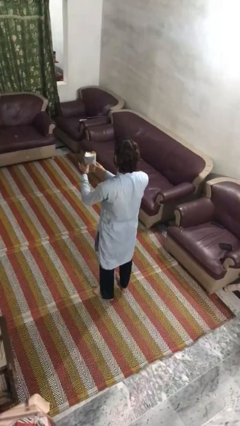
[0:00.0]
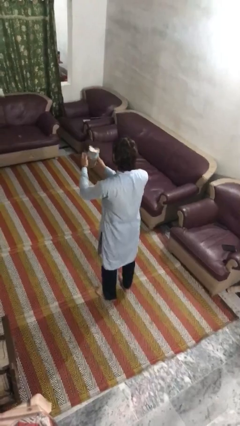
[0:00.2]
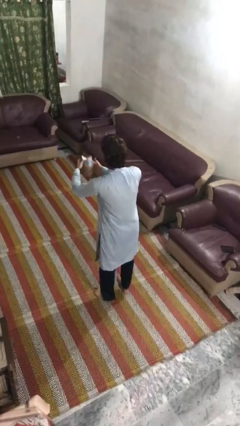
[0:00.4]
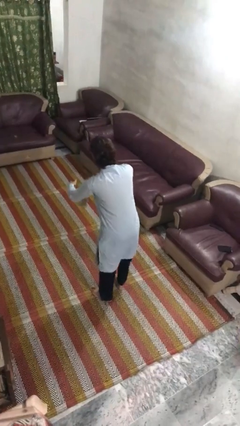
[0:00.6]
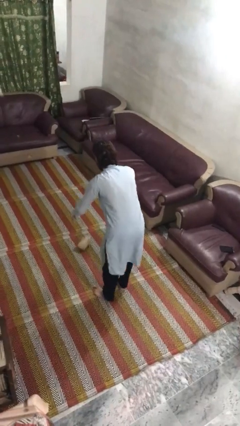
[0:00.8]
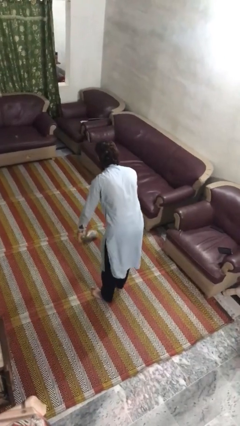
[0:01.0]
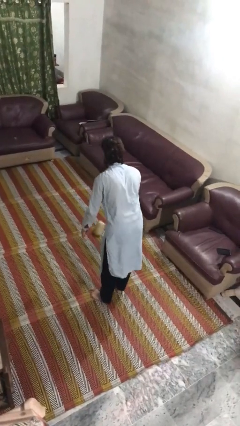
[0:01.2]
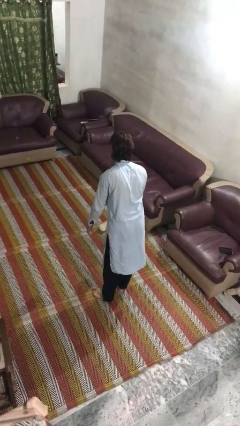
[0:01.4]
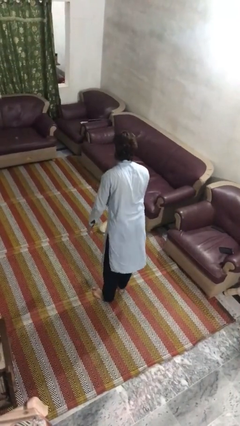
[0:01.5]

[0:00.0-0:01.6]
person drops object

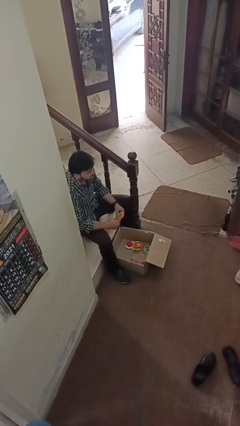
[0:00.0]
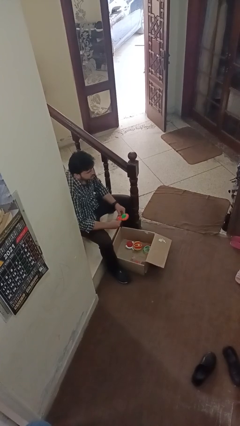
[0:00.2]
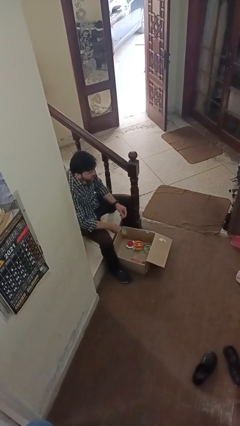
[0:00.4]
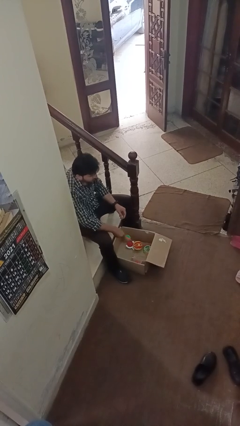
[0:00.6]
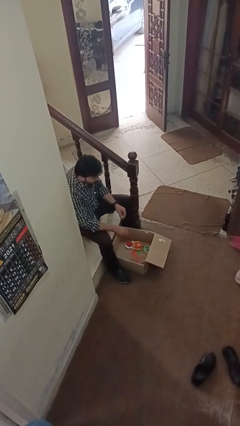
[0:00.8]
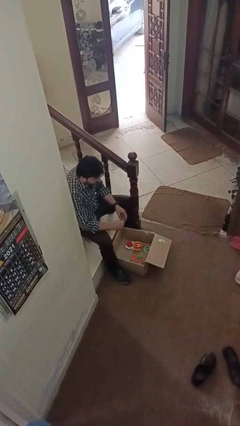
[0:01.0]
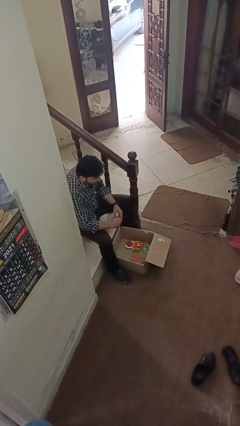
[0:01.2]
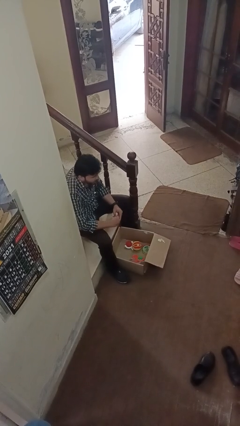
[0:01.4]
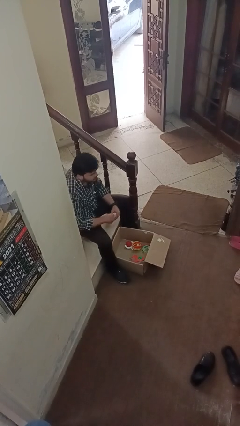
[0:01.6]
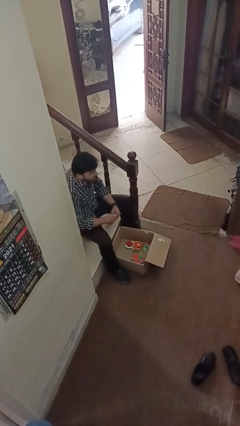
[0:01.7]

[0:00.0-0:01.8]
person puts object into box

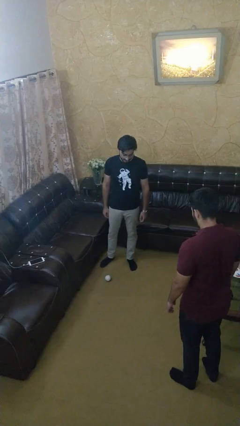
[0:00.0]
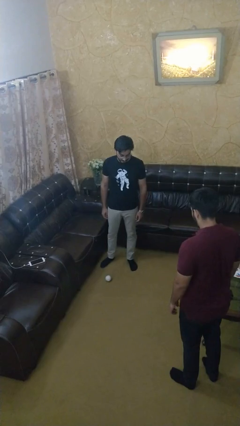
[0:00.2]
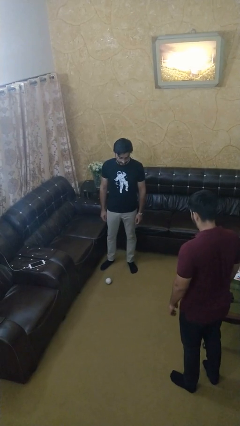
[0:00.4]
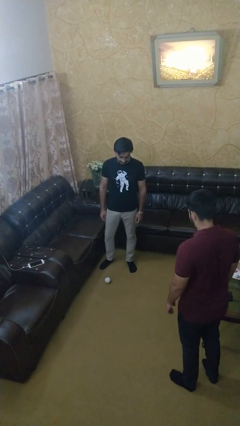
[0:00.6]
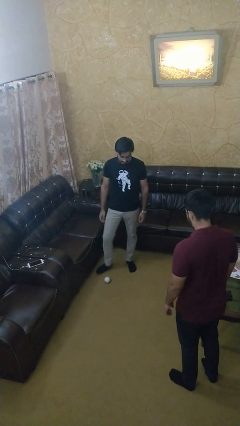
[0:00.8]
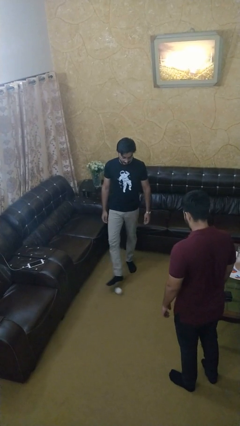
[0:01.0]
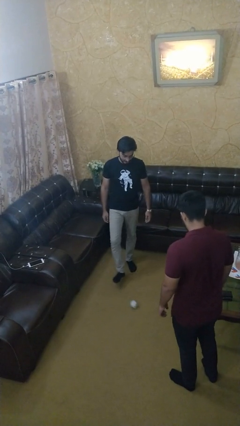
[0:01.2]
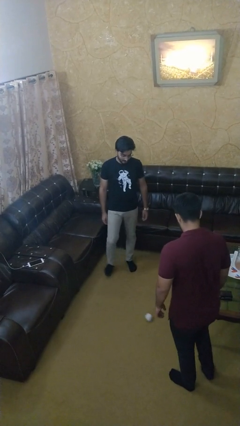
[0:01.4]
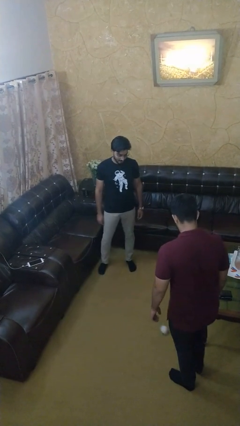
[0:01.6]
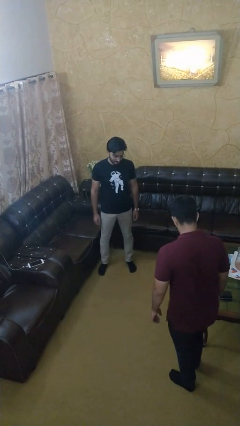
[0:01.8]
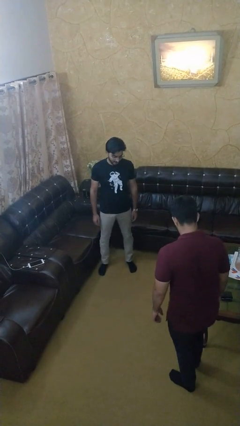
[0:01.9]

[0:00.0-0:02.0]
person kicks object to person

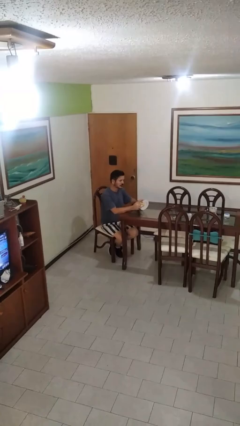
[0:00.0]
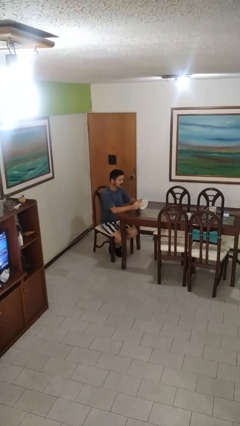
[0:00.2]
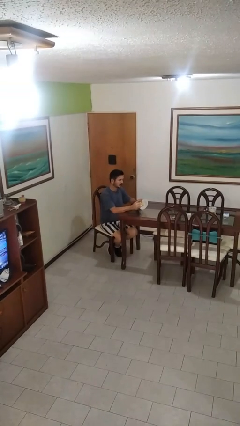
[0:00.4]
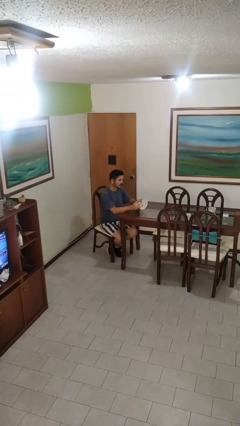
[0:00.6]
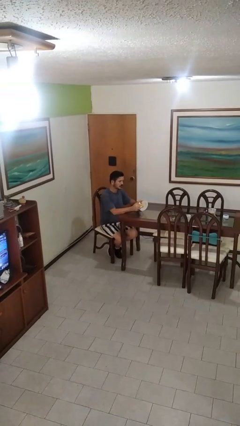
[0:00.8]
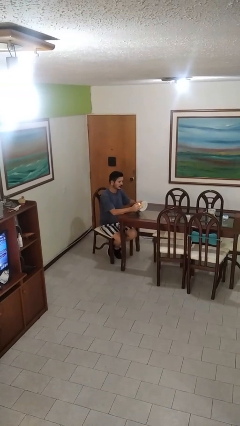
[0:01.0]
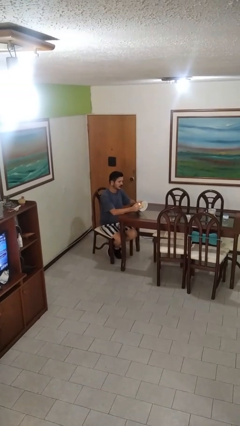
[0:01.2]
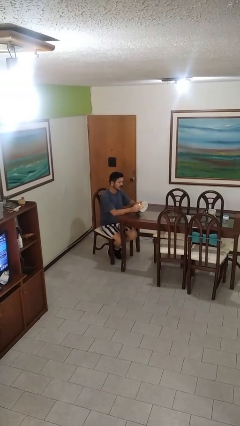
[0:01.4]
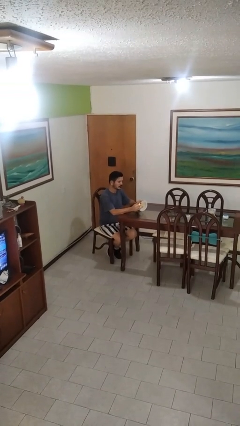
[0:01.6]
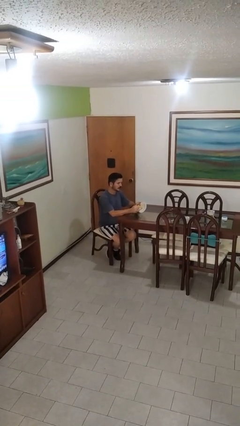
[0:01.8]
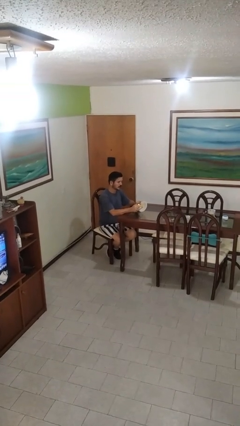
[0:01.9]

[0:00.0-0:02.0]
person lights candle

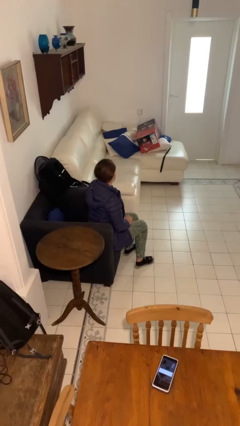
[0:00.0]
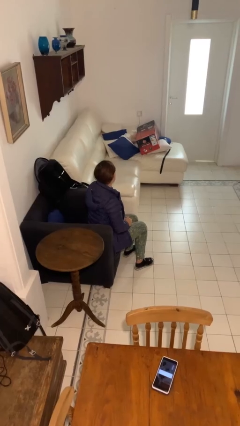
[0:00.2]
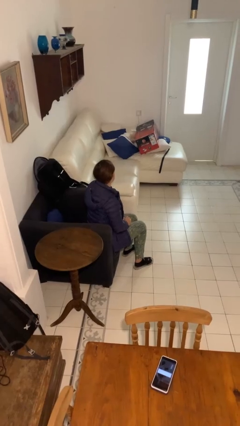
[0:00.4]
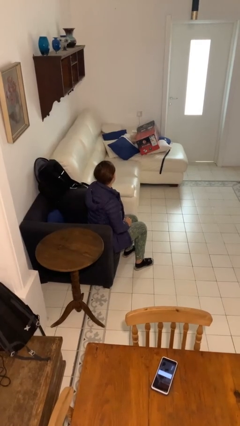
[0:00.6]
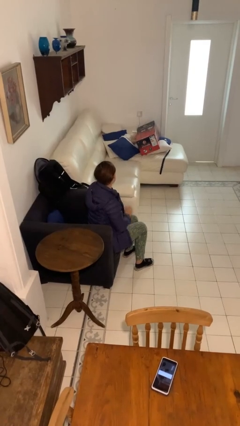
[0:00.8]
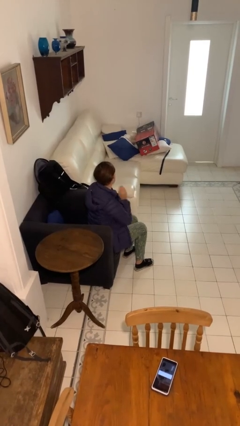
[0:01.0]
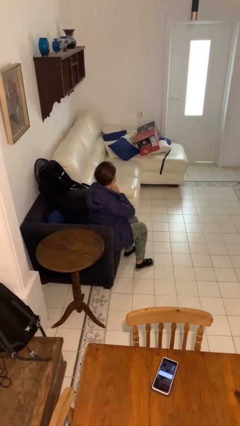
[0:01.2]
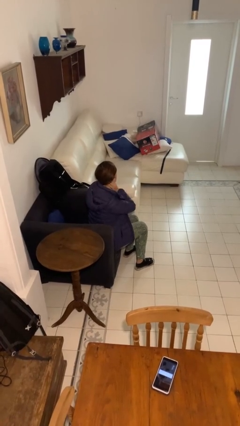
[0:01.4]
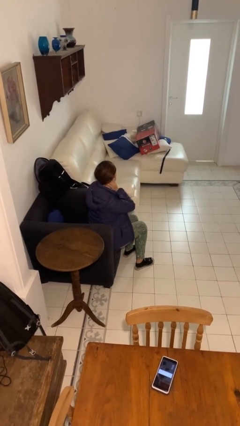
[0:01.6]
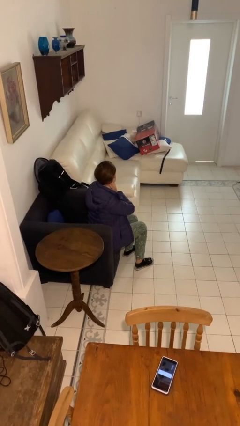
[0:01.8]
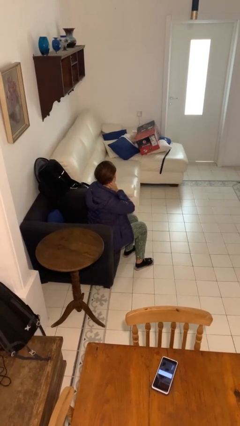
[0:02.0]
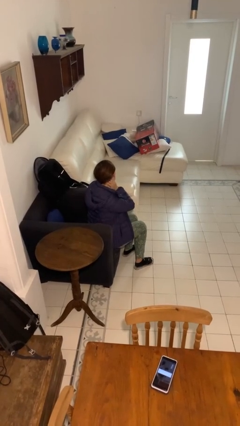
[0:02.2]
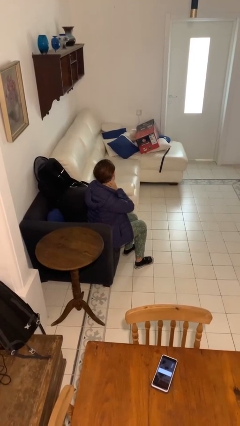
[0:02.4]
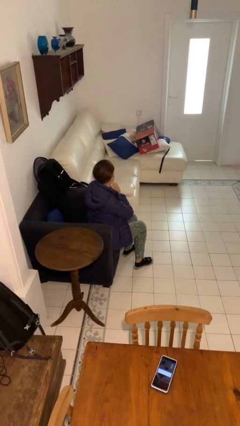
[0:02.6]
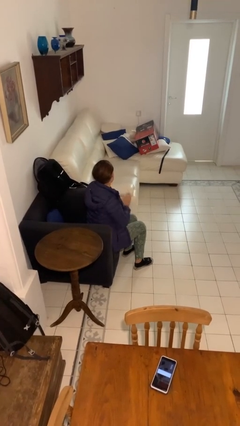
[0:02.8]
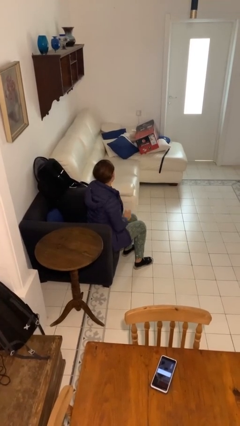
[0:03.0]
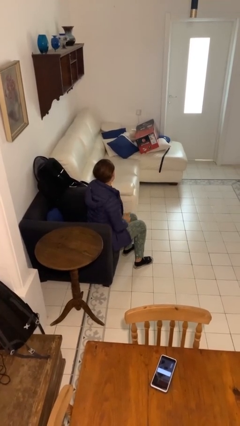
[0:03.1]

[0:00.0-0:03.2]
person rubs neck

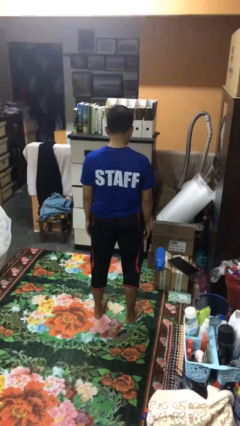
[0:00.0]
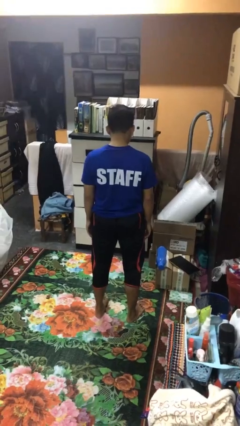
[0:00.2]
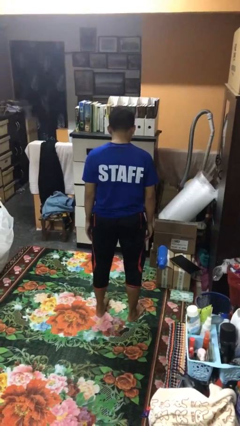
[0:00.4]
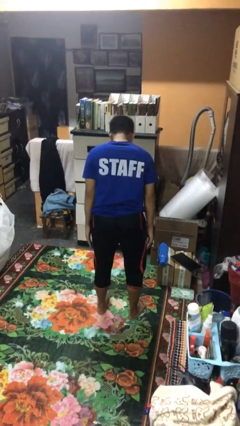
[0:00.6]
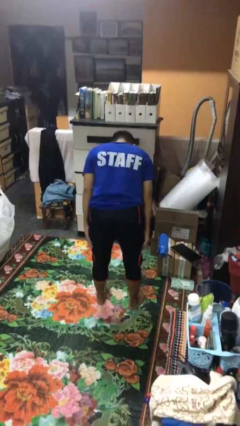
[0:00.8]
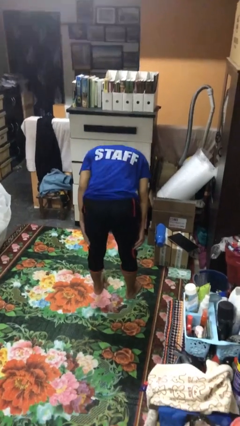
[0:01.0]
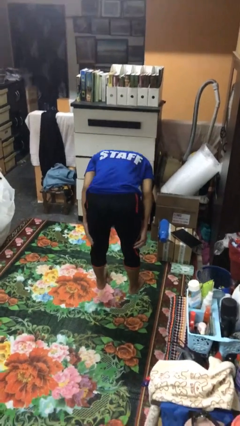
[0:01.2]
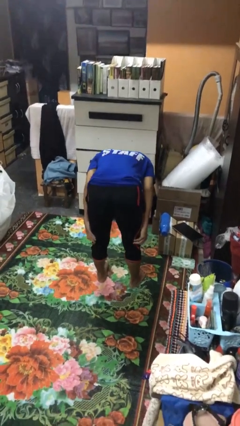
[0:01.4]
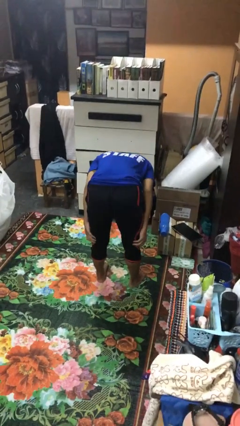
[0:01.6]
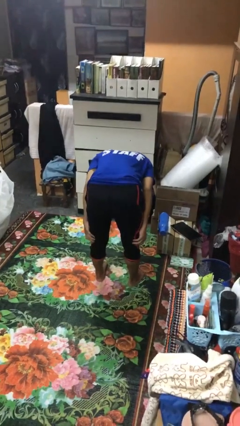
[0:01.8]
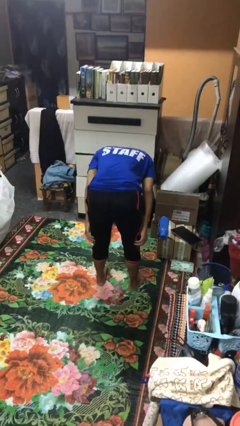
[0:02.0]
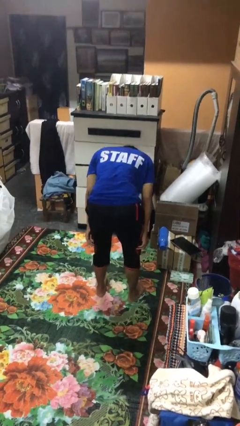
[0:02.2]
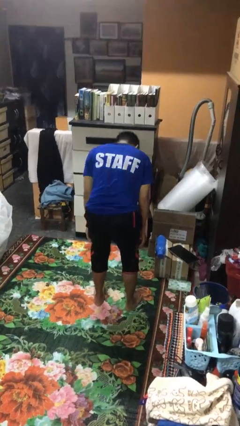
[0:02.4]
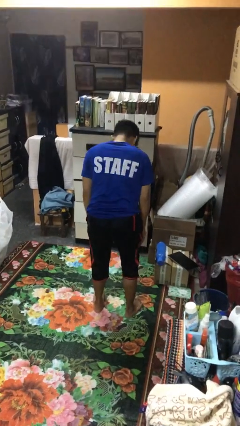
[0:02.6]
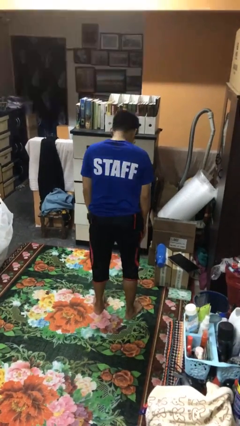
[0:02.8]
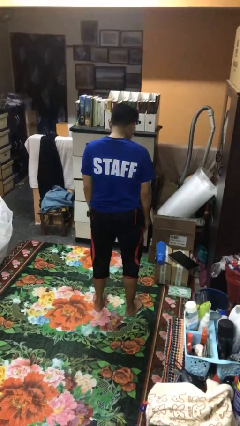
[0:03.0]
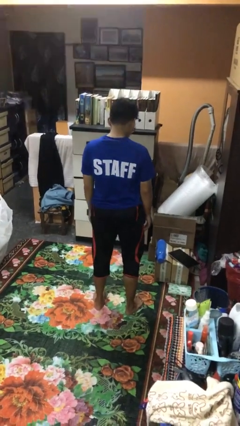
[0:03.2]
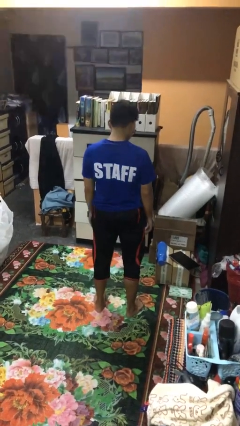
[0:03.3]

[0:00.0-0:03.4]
person bows

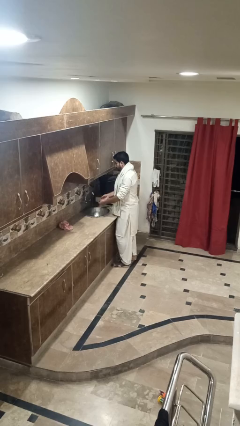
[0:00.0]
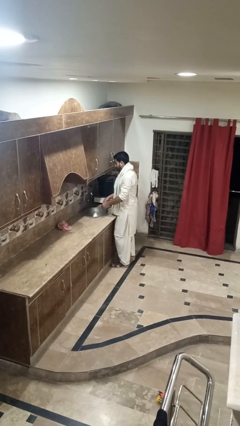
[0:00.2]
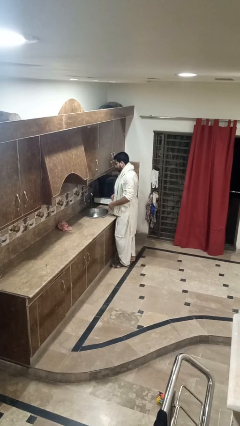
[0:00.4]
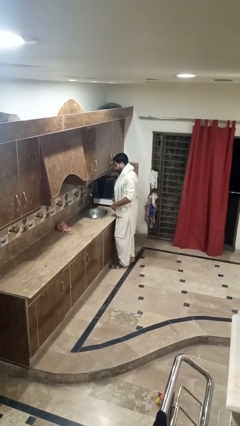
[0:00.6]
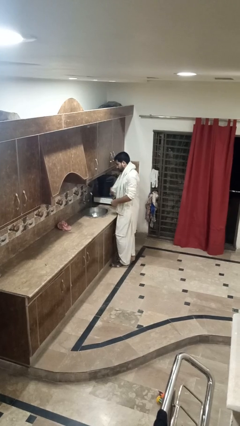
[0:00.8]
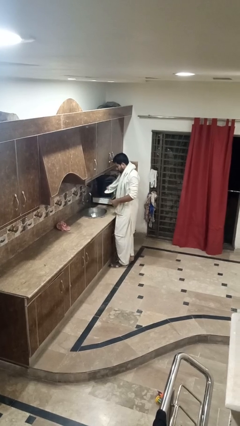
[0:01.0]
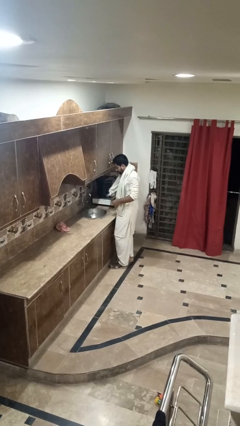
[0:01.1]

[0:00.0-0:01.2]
person washes hands

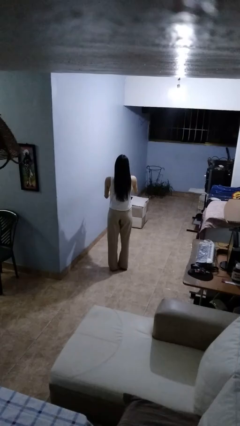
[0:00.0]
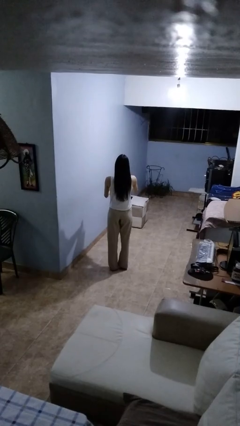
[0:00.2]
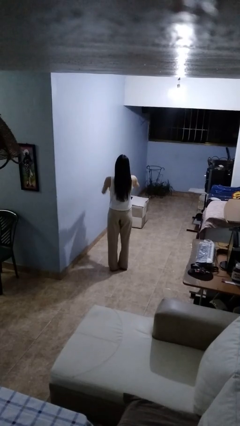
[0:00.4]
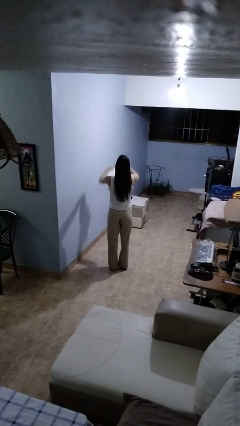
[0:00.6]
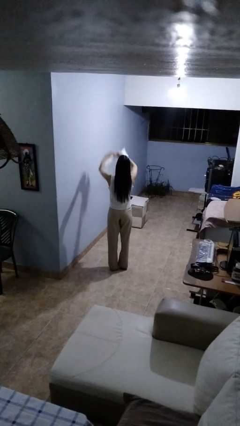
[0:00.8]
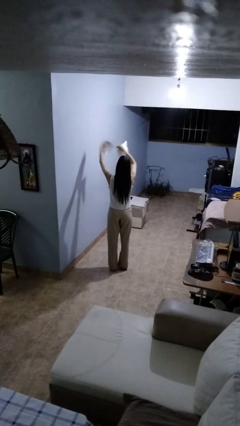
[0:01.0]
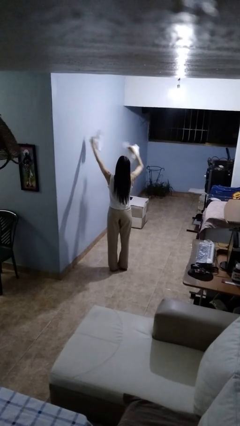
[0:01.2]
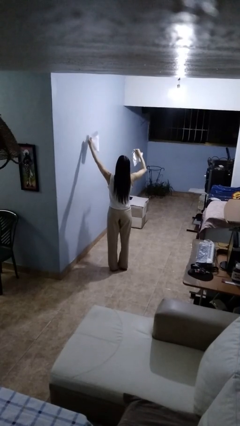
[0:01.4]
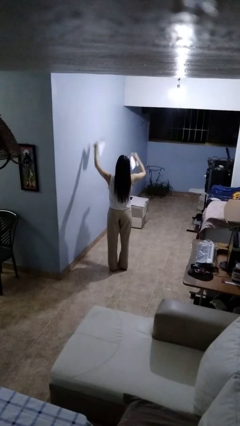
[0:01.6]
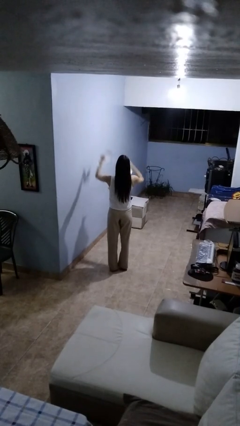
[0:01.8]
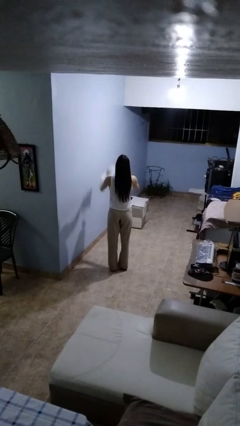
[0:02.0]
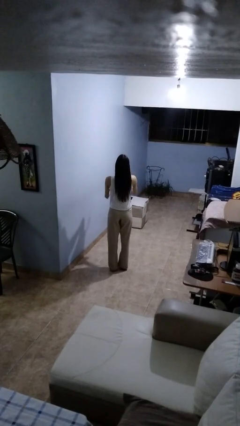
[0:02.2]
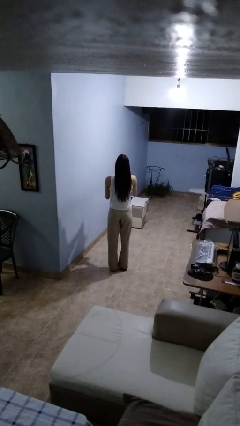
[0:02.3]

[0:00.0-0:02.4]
person tears paper
